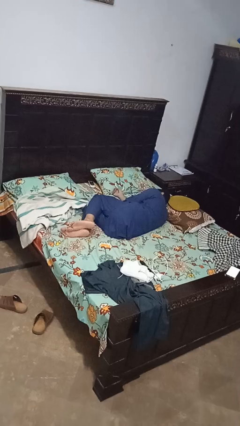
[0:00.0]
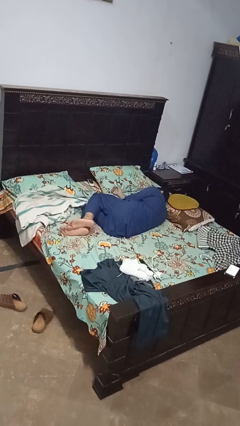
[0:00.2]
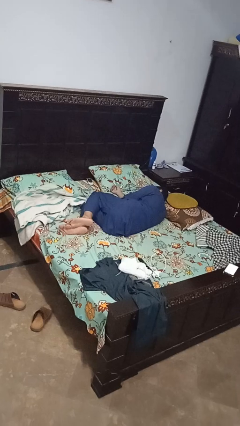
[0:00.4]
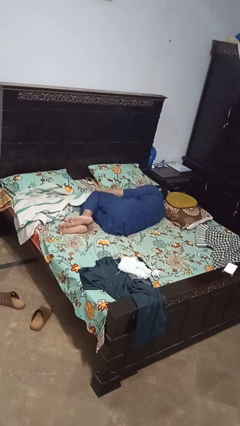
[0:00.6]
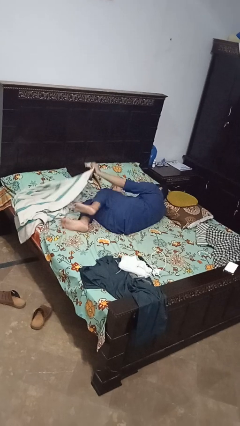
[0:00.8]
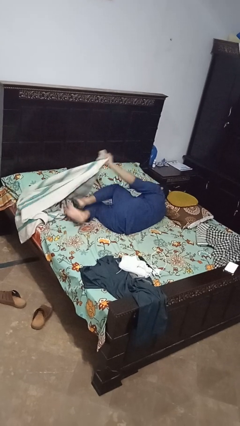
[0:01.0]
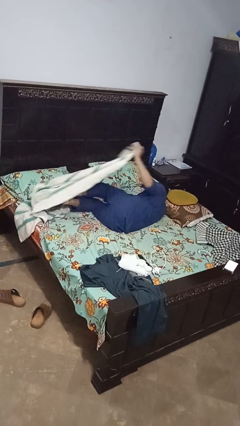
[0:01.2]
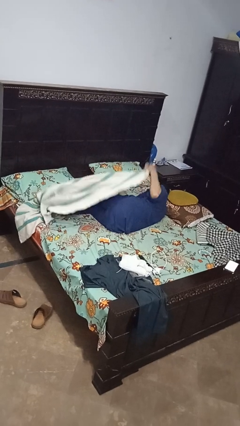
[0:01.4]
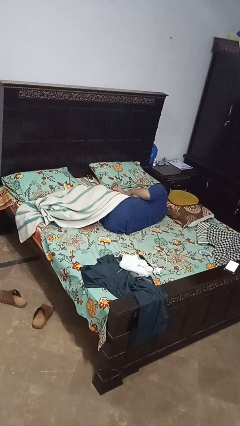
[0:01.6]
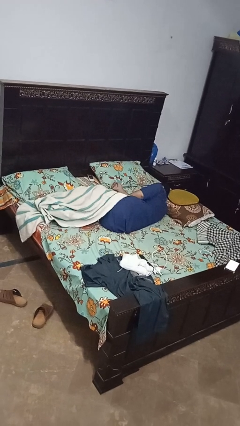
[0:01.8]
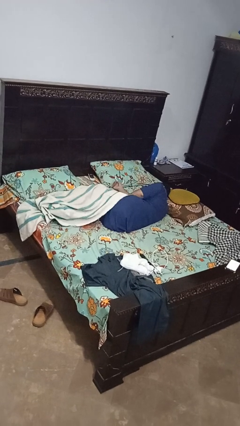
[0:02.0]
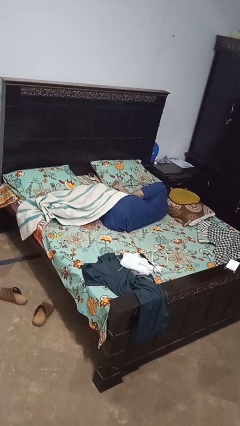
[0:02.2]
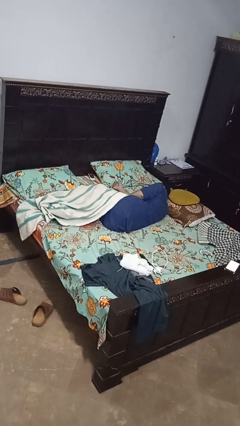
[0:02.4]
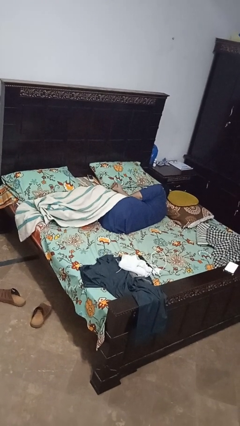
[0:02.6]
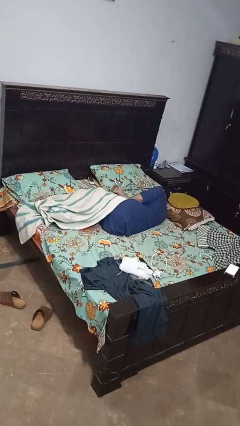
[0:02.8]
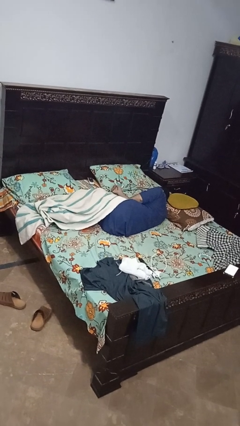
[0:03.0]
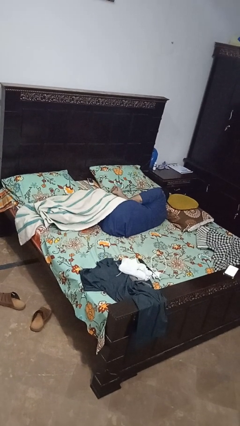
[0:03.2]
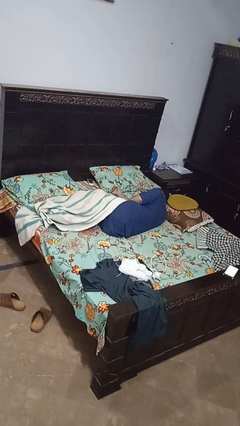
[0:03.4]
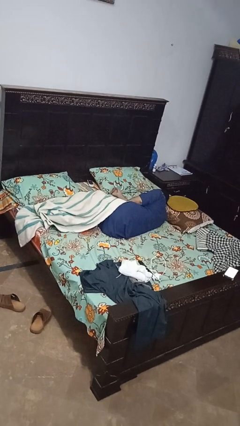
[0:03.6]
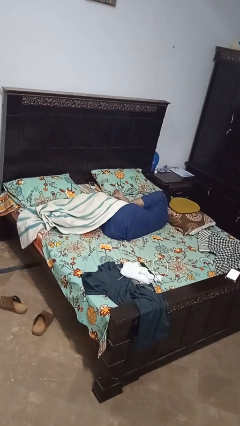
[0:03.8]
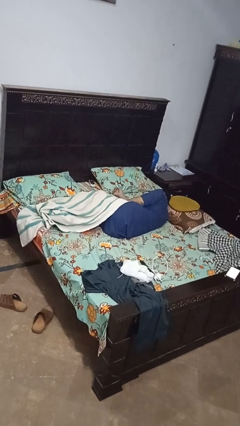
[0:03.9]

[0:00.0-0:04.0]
person covers with bedsheets

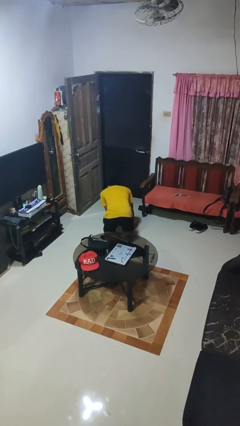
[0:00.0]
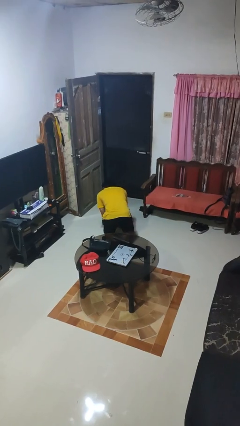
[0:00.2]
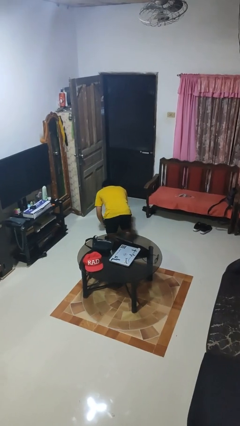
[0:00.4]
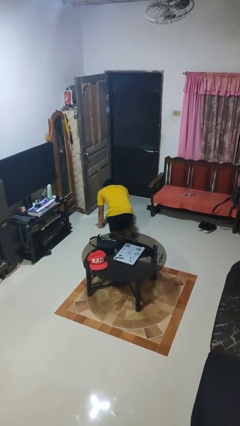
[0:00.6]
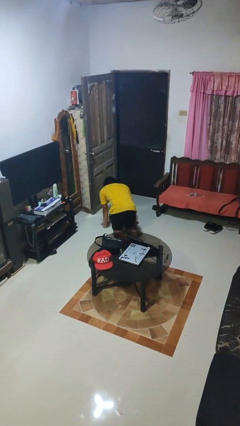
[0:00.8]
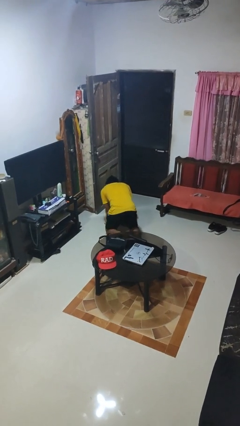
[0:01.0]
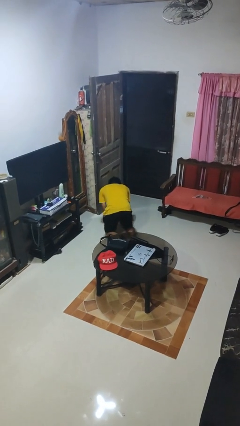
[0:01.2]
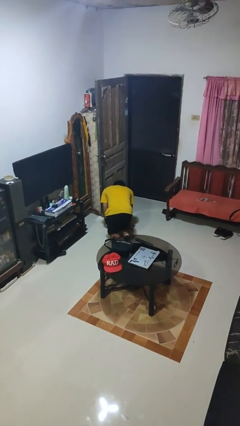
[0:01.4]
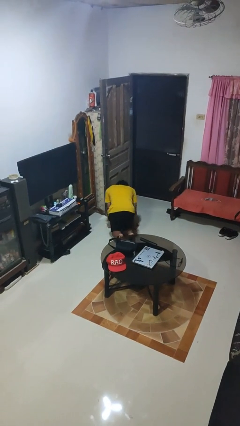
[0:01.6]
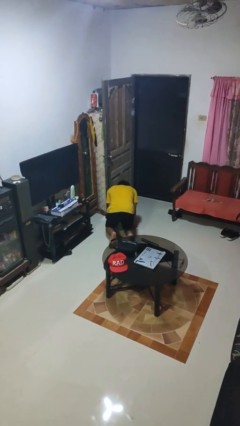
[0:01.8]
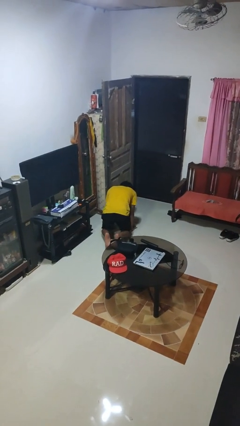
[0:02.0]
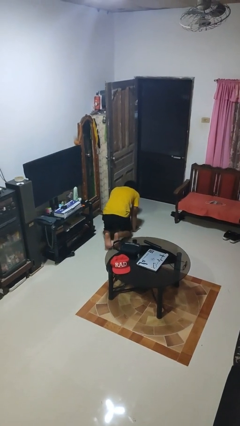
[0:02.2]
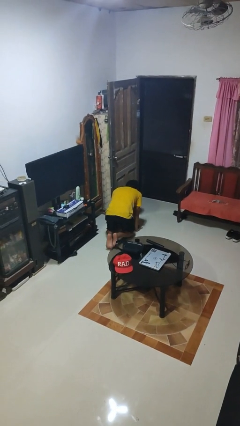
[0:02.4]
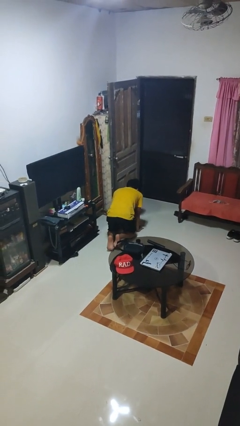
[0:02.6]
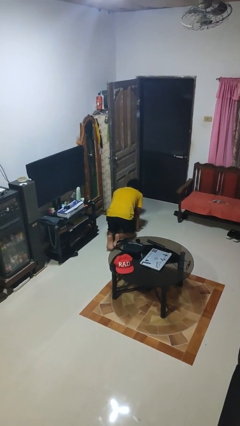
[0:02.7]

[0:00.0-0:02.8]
person crawls

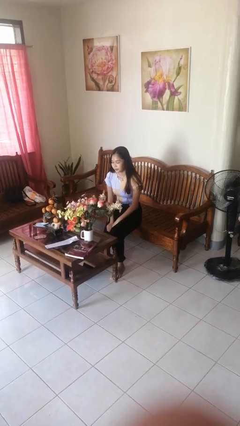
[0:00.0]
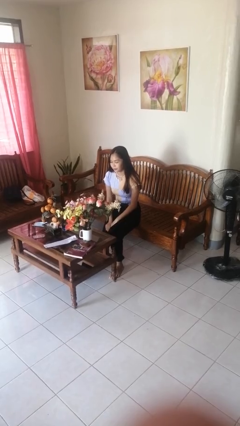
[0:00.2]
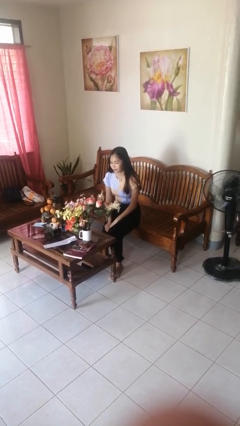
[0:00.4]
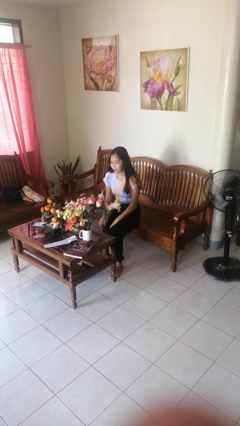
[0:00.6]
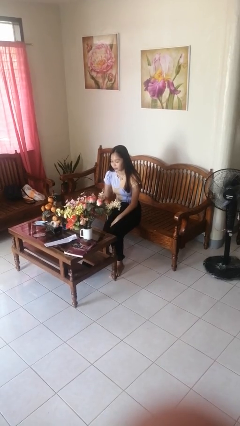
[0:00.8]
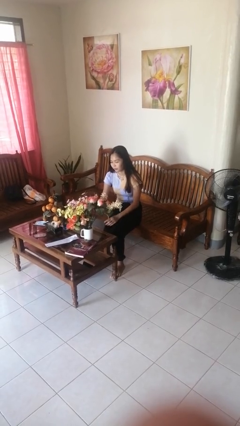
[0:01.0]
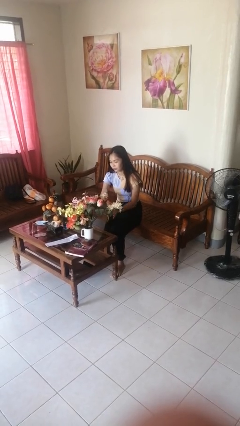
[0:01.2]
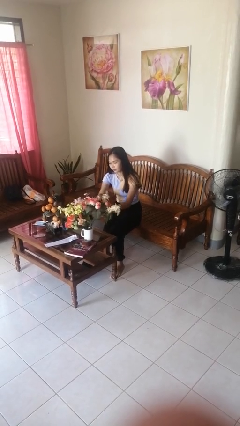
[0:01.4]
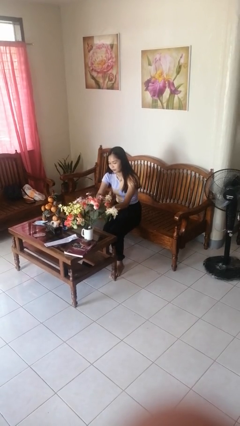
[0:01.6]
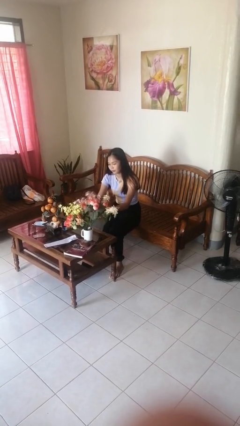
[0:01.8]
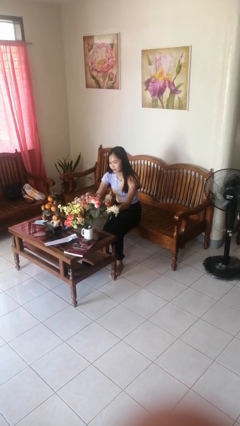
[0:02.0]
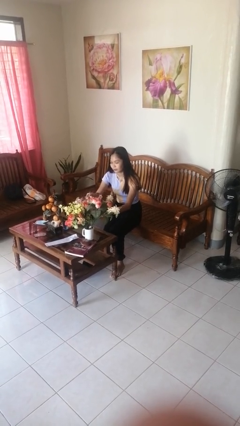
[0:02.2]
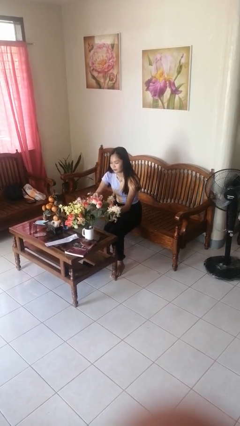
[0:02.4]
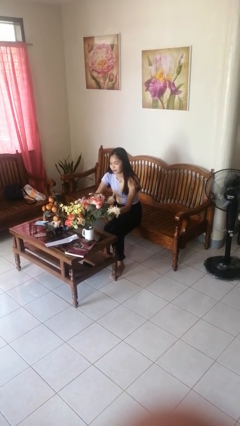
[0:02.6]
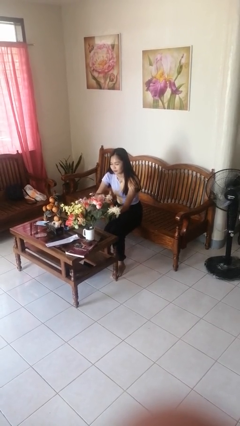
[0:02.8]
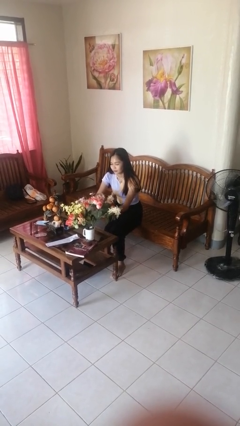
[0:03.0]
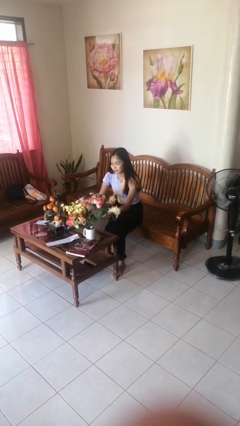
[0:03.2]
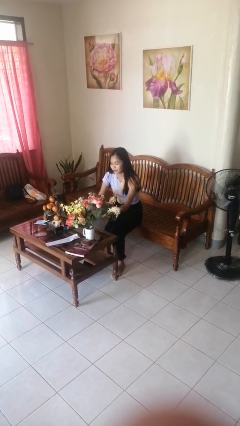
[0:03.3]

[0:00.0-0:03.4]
person arranges flowers in vase

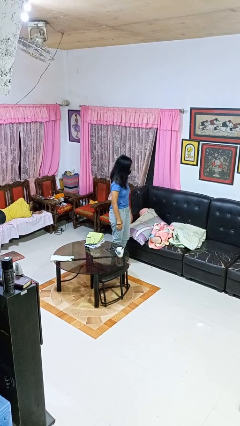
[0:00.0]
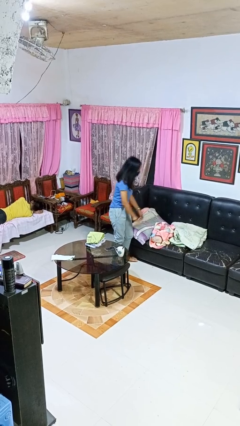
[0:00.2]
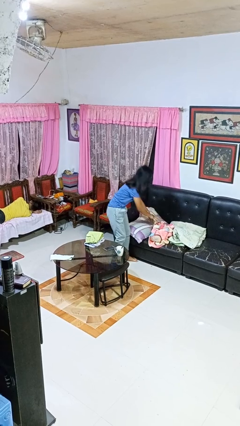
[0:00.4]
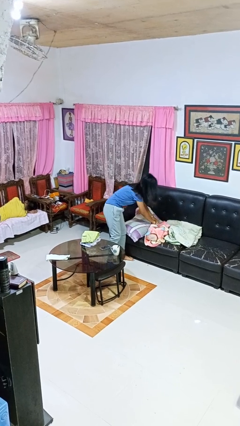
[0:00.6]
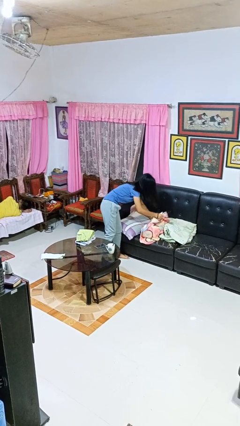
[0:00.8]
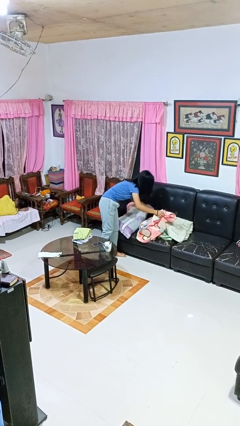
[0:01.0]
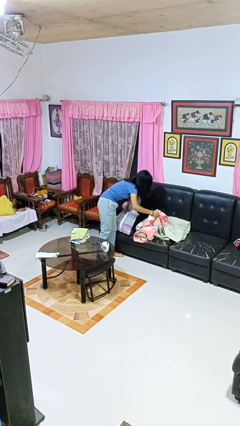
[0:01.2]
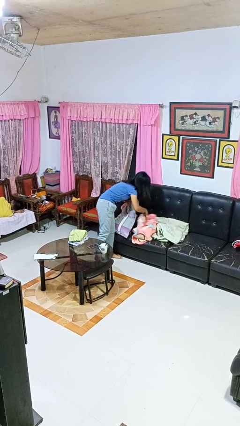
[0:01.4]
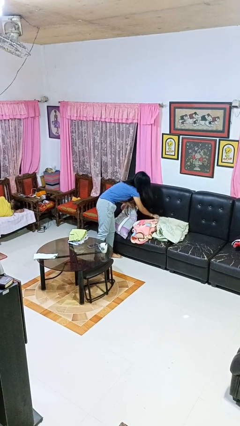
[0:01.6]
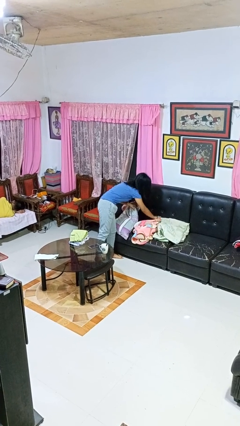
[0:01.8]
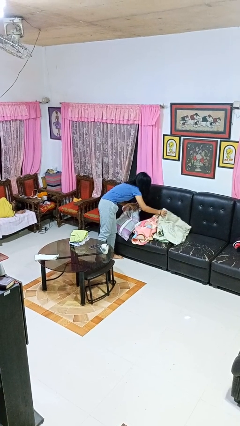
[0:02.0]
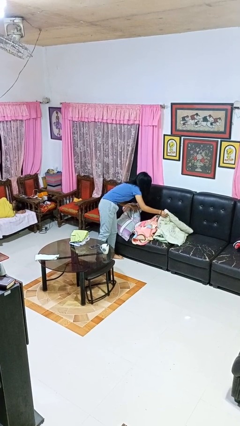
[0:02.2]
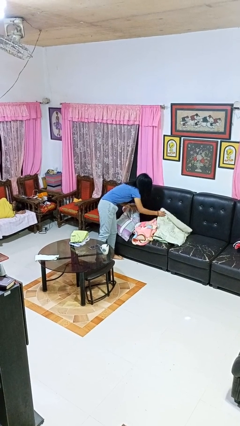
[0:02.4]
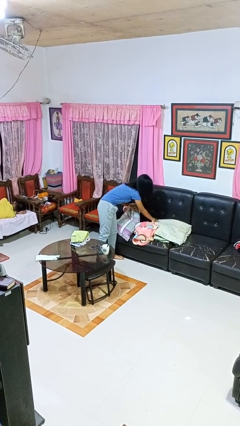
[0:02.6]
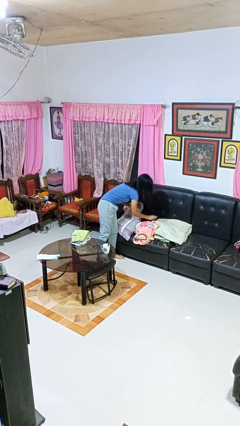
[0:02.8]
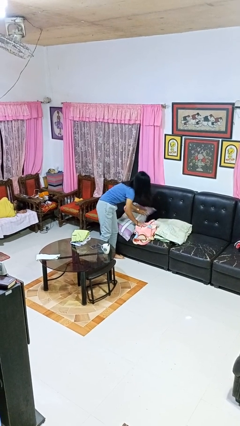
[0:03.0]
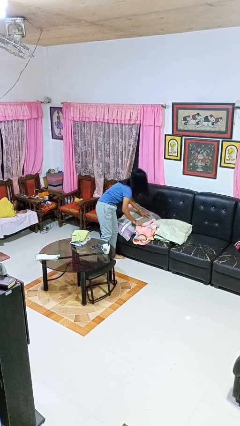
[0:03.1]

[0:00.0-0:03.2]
person searches in couch

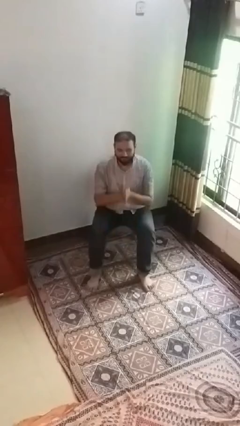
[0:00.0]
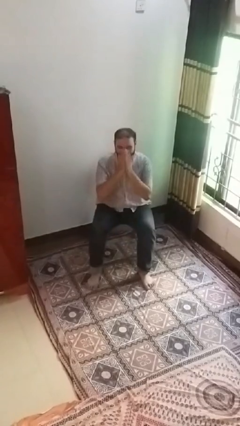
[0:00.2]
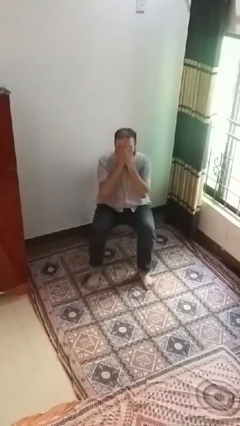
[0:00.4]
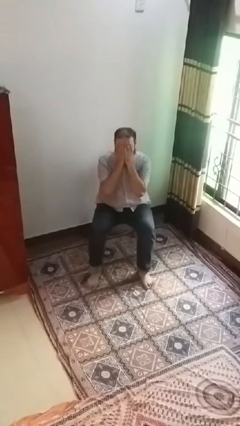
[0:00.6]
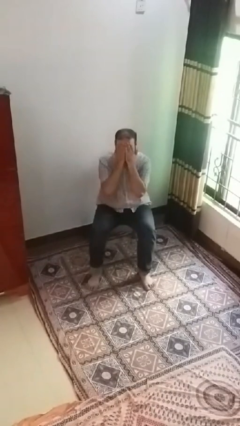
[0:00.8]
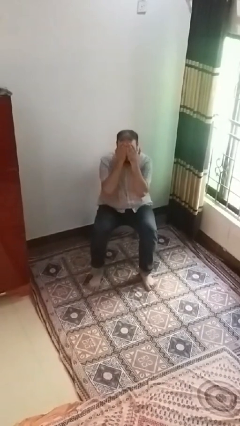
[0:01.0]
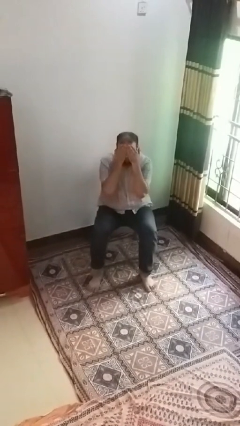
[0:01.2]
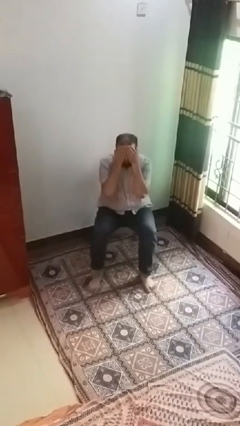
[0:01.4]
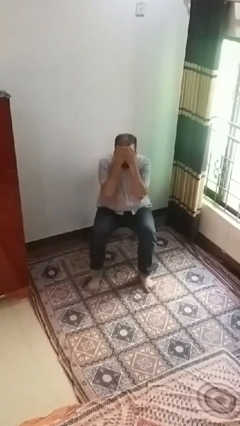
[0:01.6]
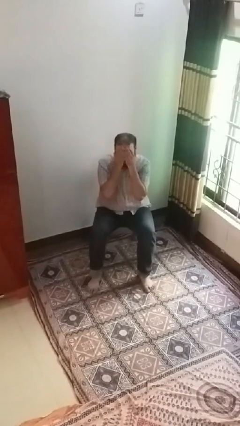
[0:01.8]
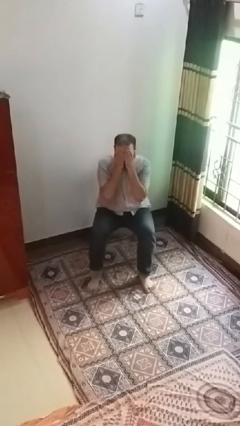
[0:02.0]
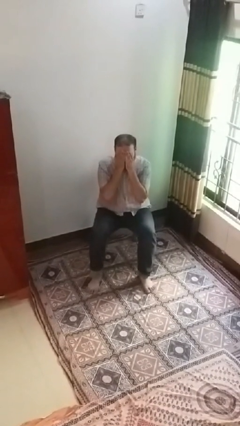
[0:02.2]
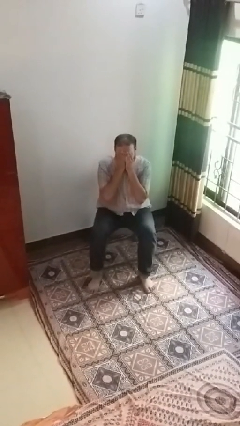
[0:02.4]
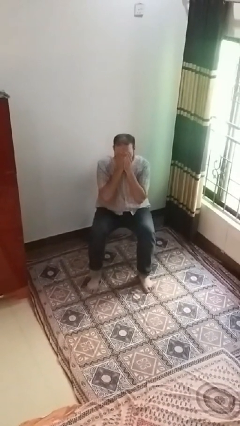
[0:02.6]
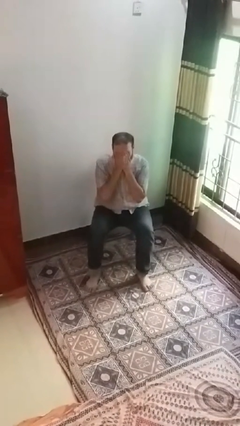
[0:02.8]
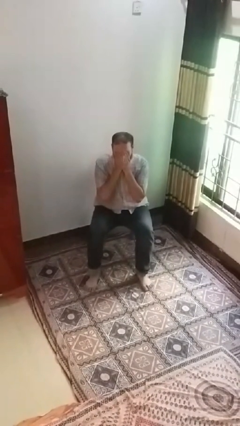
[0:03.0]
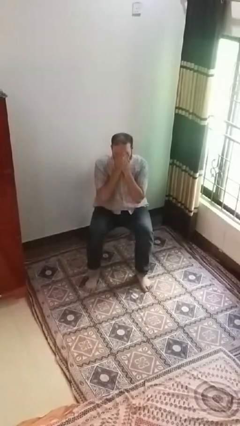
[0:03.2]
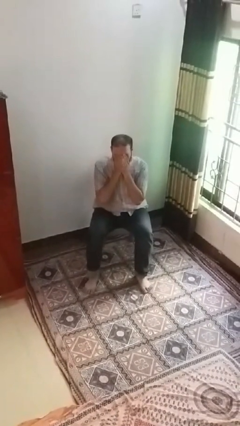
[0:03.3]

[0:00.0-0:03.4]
person covers face with hands

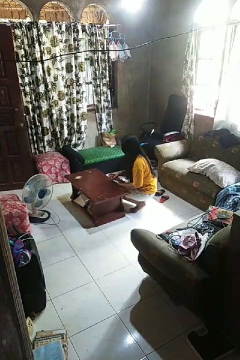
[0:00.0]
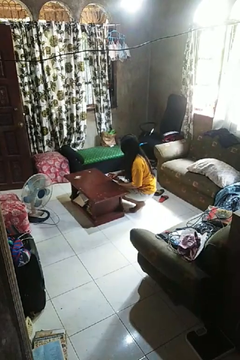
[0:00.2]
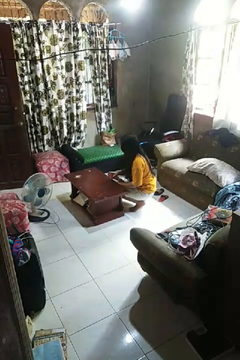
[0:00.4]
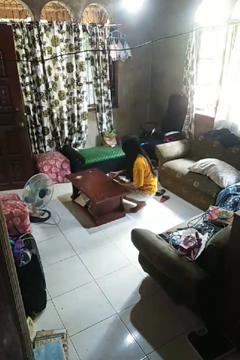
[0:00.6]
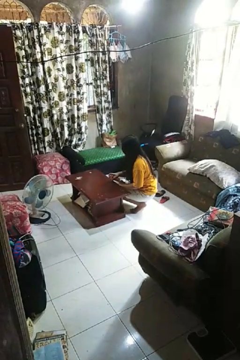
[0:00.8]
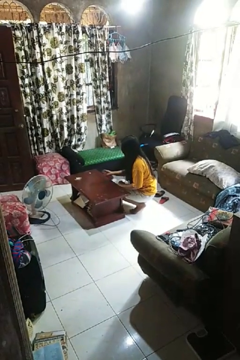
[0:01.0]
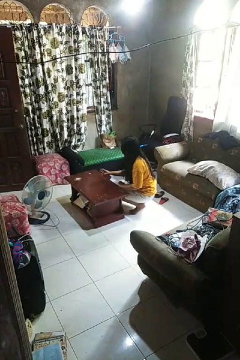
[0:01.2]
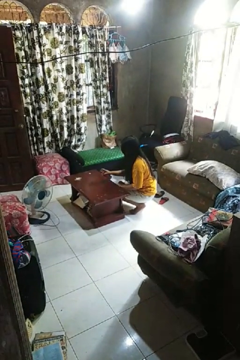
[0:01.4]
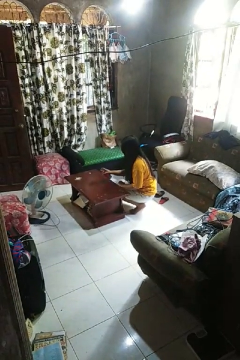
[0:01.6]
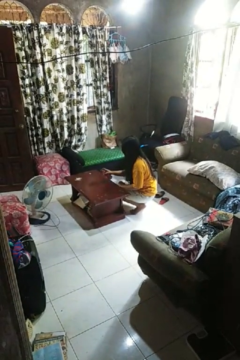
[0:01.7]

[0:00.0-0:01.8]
person sprays from bottle
